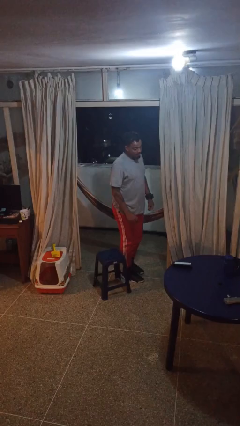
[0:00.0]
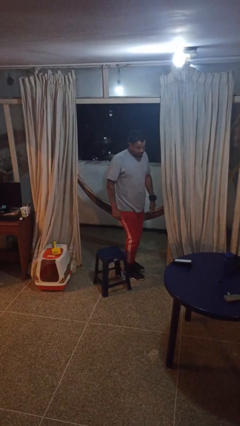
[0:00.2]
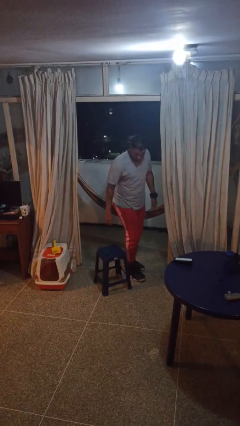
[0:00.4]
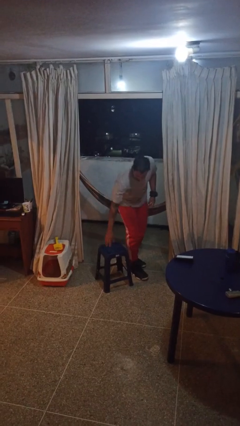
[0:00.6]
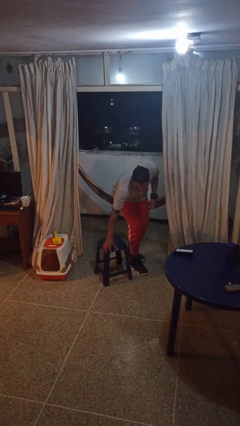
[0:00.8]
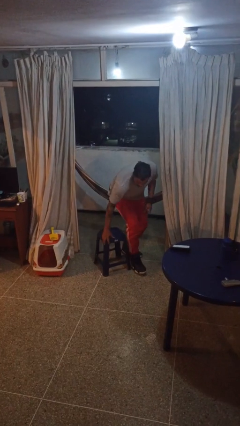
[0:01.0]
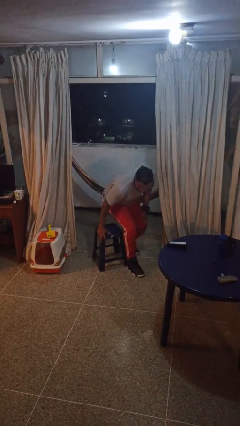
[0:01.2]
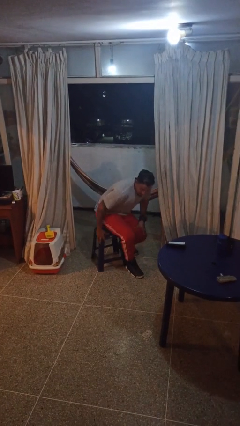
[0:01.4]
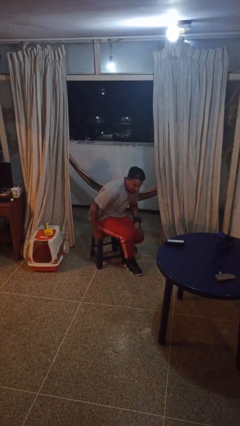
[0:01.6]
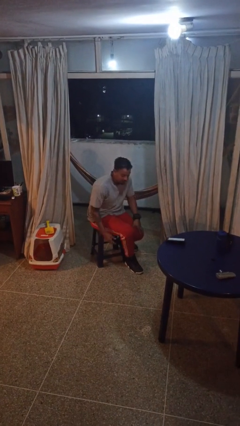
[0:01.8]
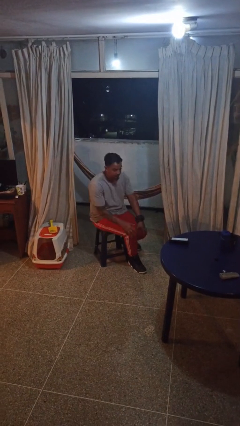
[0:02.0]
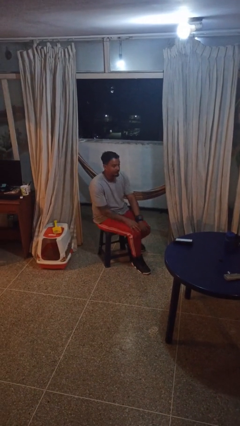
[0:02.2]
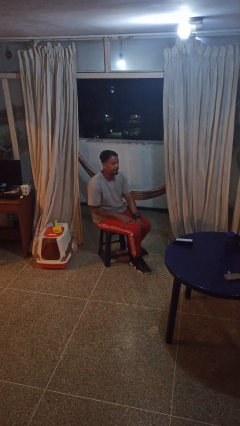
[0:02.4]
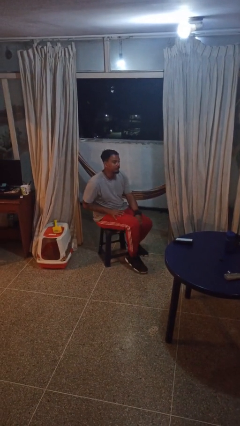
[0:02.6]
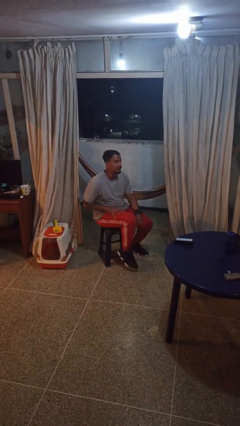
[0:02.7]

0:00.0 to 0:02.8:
person sits down

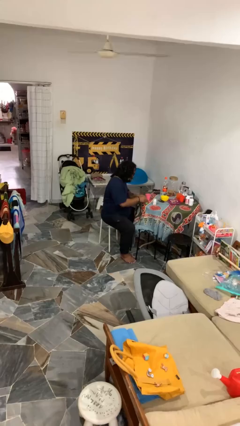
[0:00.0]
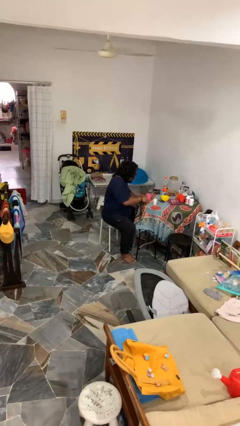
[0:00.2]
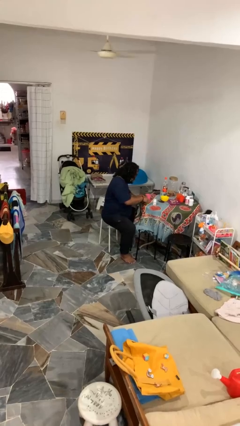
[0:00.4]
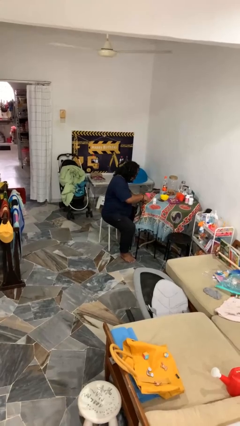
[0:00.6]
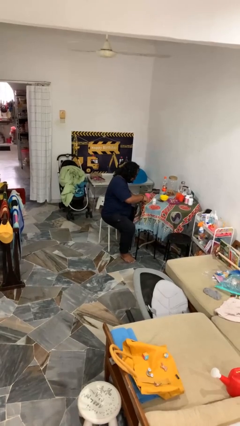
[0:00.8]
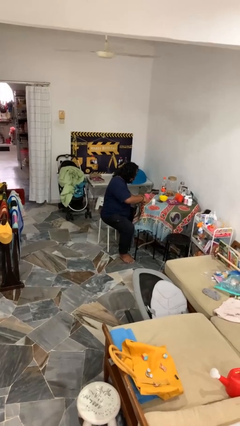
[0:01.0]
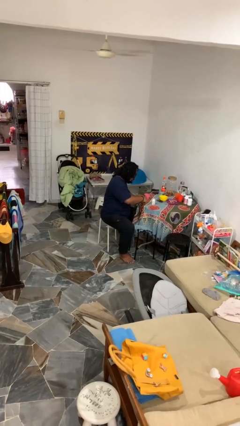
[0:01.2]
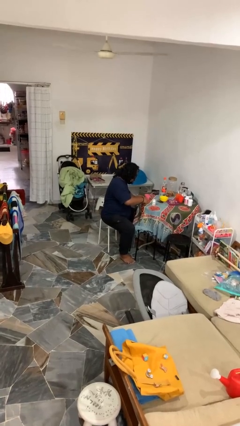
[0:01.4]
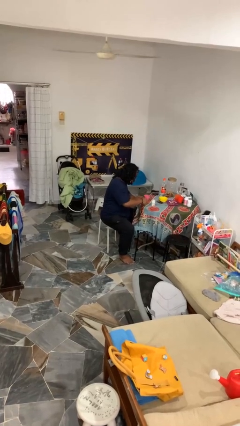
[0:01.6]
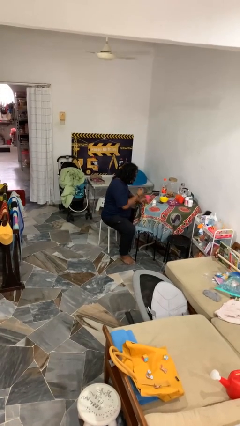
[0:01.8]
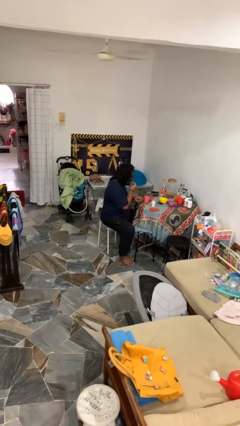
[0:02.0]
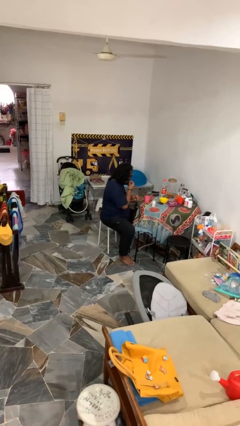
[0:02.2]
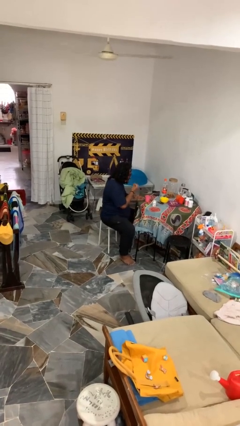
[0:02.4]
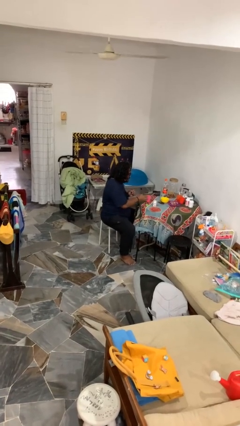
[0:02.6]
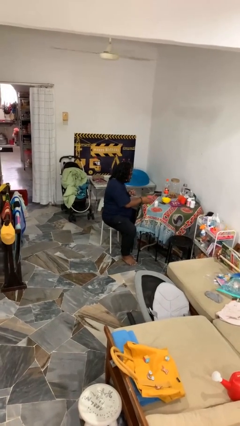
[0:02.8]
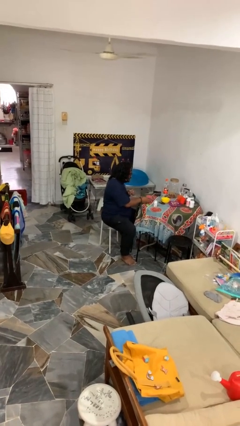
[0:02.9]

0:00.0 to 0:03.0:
person takes medicine pills

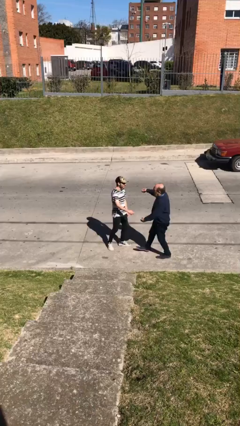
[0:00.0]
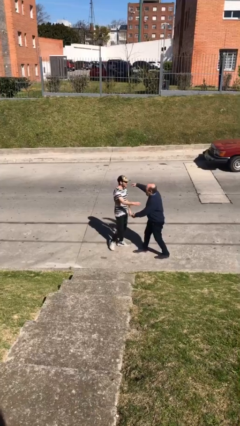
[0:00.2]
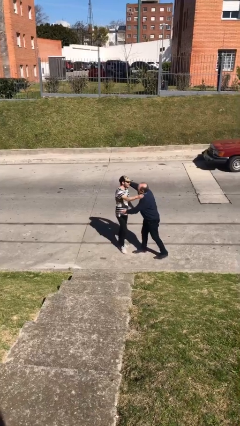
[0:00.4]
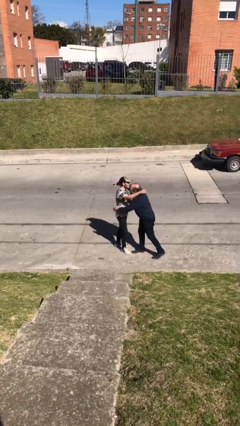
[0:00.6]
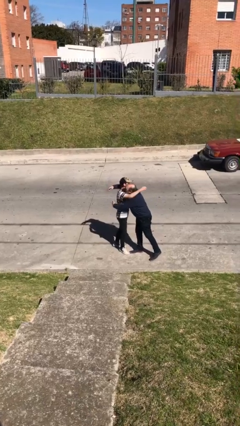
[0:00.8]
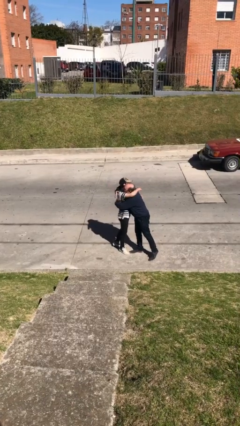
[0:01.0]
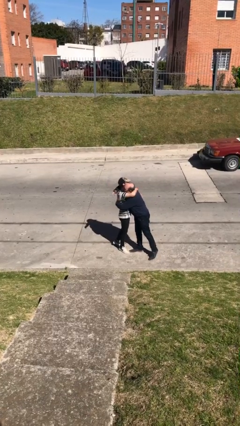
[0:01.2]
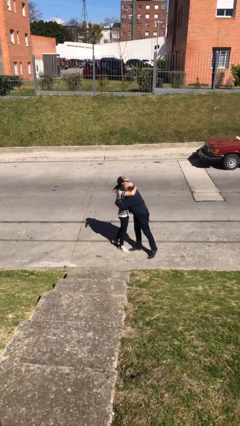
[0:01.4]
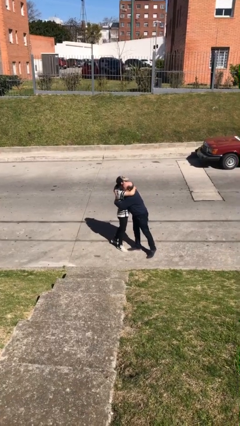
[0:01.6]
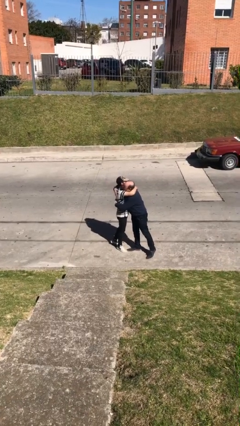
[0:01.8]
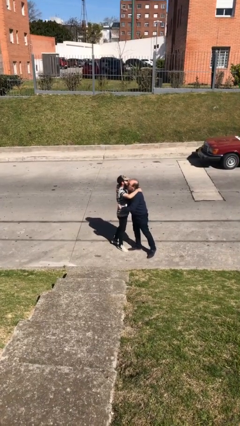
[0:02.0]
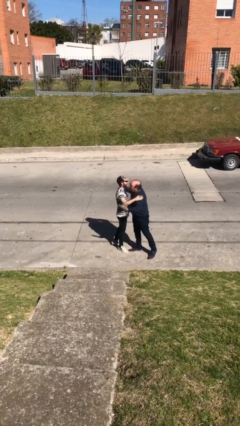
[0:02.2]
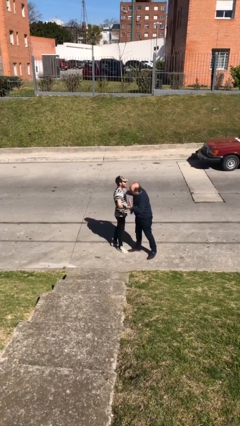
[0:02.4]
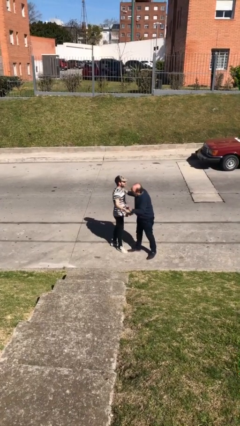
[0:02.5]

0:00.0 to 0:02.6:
person embraces person

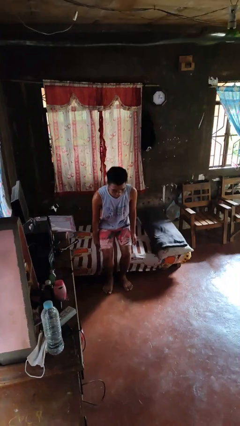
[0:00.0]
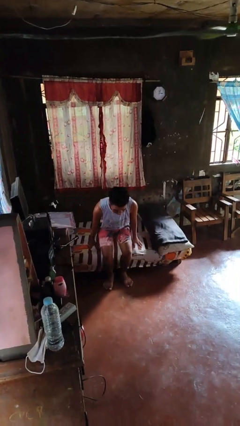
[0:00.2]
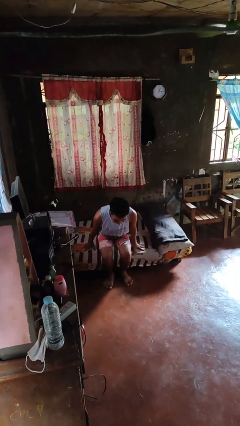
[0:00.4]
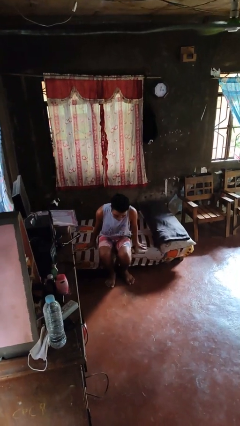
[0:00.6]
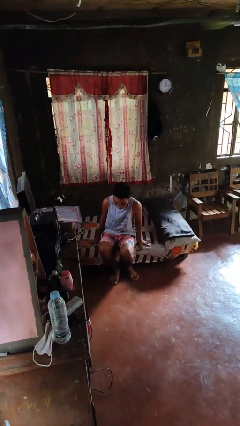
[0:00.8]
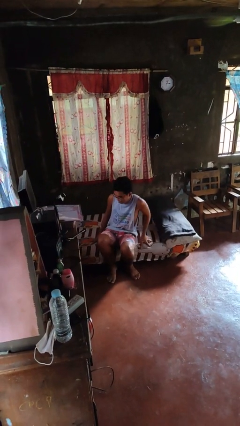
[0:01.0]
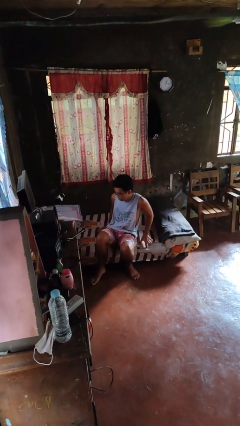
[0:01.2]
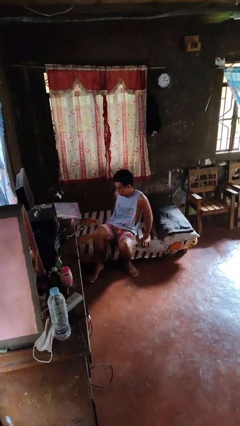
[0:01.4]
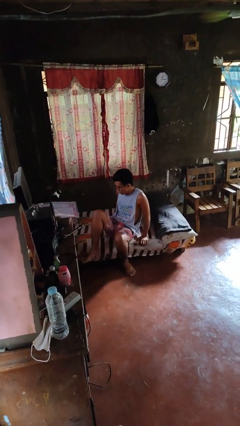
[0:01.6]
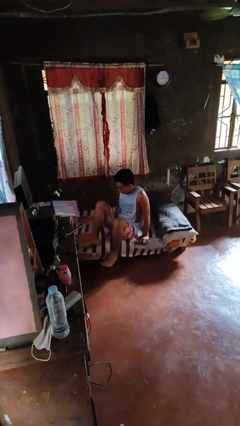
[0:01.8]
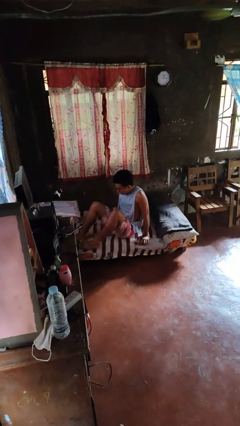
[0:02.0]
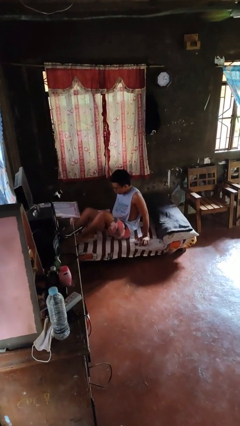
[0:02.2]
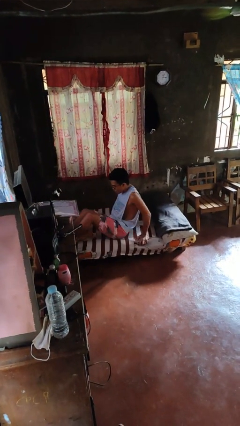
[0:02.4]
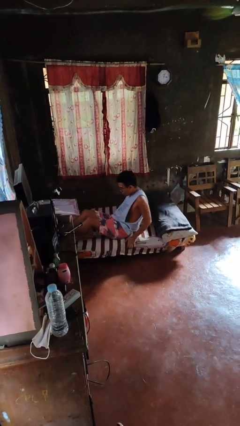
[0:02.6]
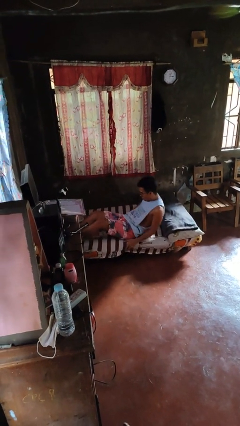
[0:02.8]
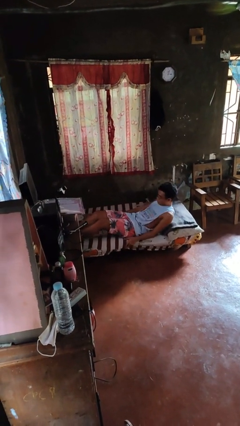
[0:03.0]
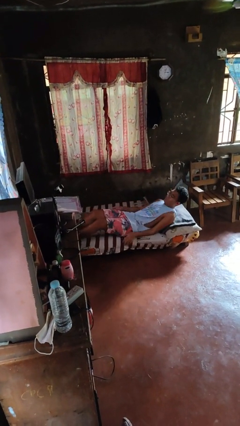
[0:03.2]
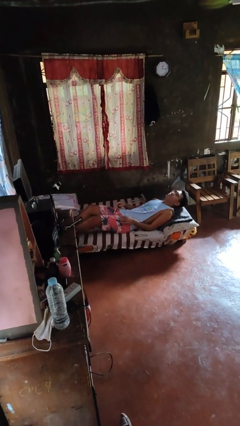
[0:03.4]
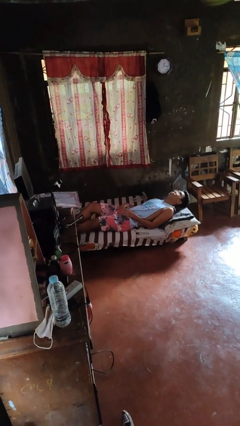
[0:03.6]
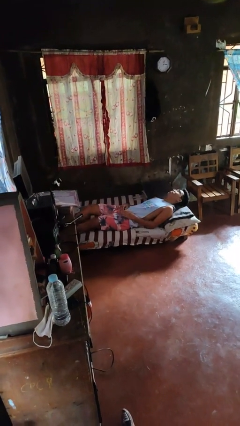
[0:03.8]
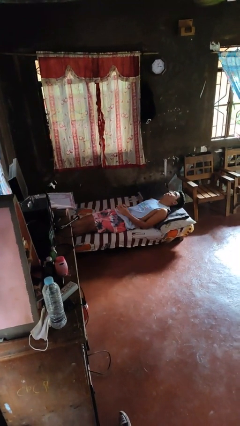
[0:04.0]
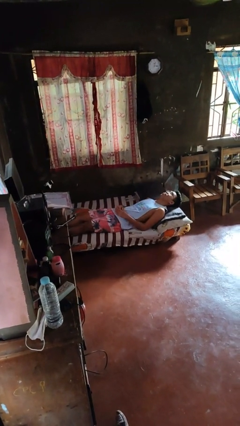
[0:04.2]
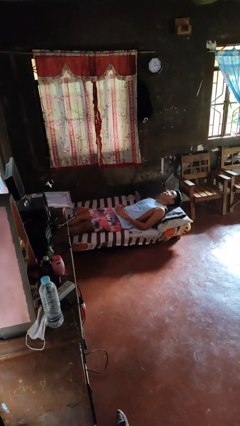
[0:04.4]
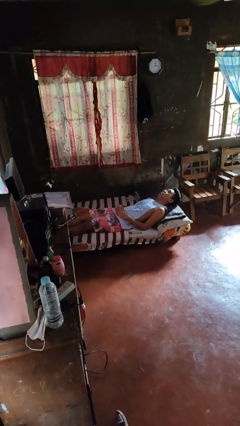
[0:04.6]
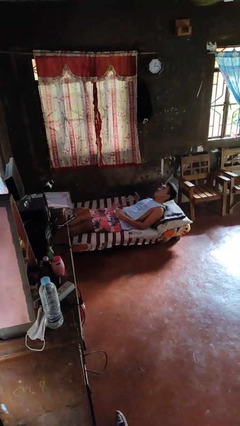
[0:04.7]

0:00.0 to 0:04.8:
person lies down on bed

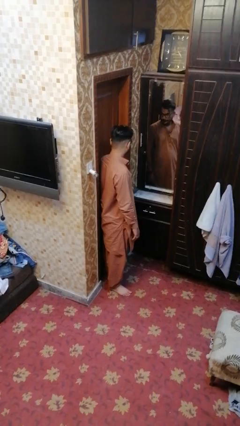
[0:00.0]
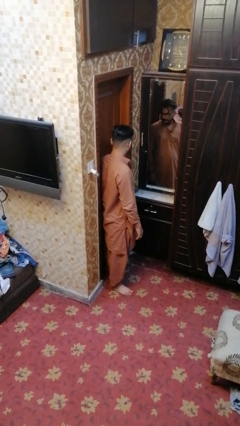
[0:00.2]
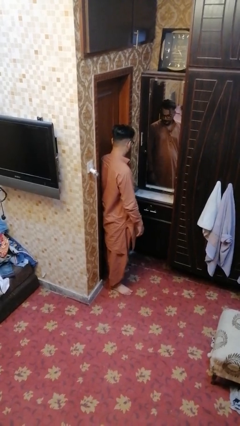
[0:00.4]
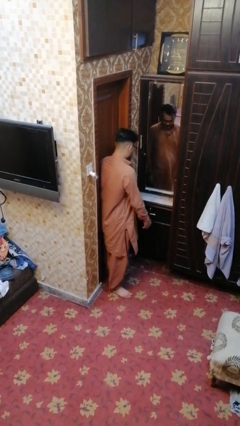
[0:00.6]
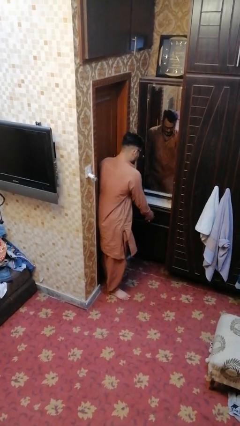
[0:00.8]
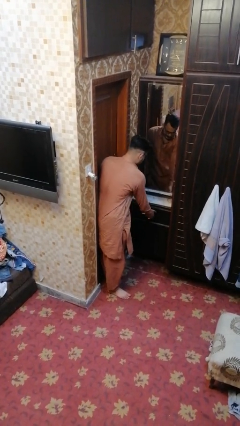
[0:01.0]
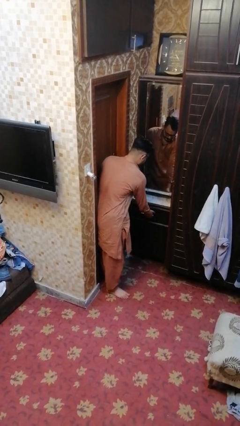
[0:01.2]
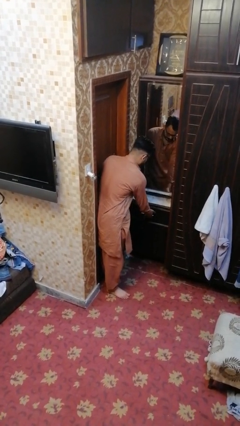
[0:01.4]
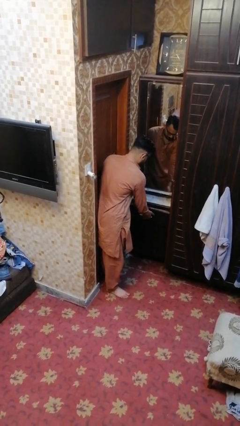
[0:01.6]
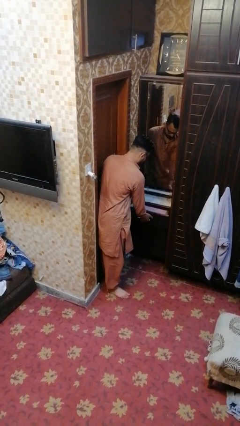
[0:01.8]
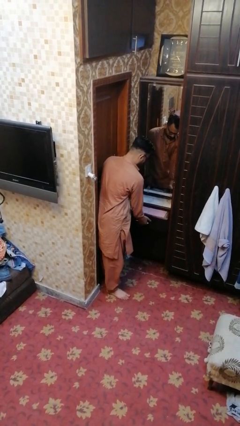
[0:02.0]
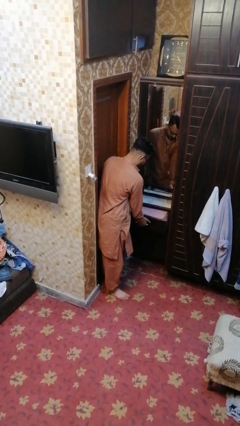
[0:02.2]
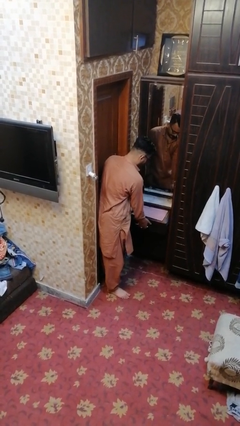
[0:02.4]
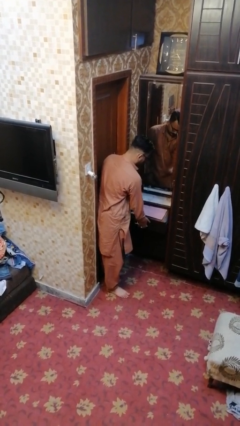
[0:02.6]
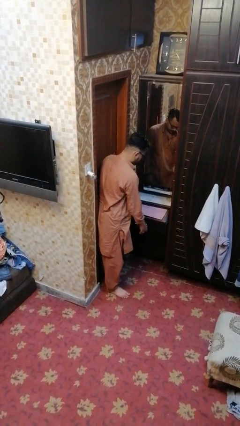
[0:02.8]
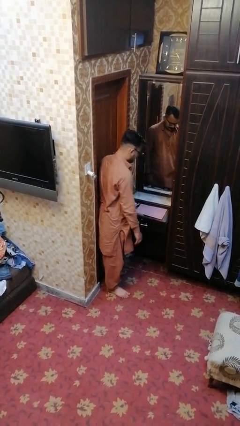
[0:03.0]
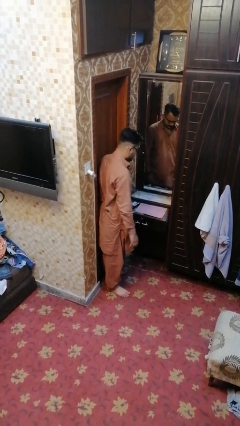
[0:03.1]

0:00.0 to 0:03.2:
person opens dresser drawer

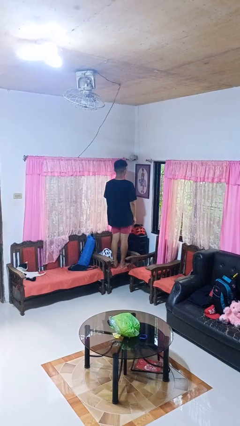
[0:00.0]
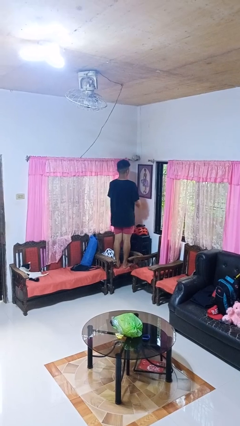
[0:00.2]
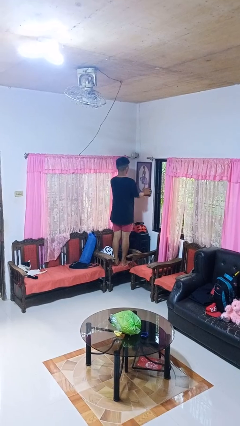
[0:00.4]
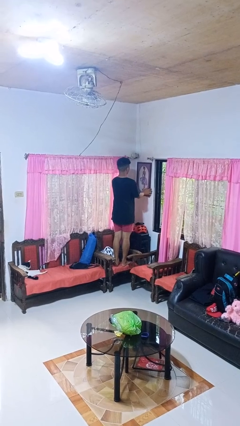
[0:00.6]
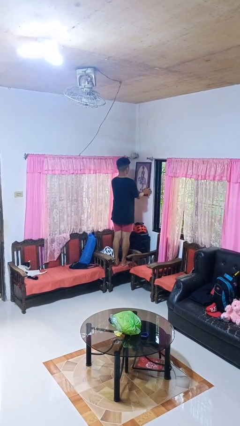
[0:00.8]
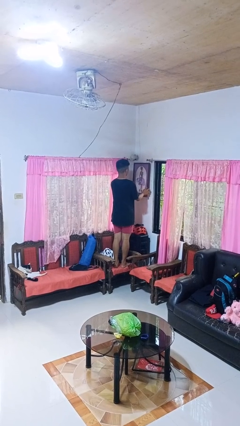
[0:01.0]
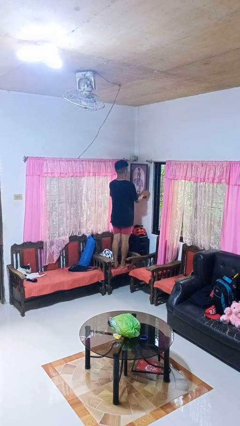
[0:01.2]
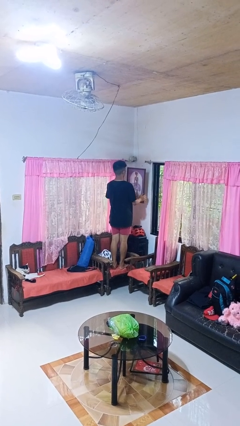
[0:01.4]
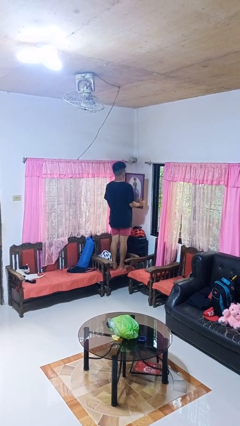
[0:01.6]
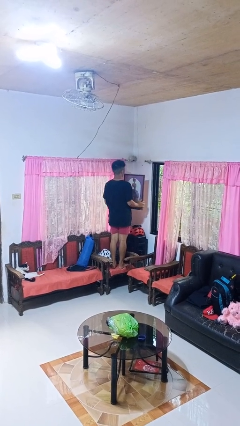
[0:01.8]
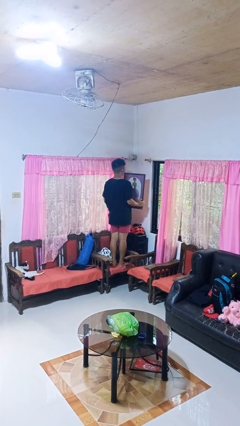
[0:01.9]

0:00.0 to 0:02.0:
person takes down picture frame
